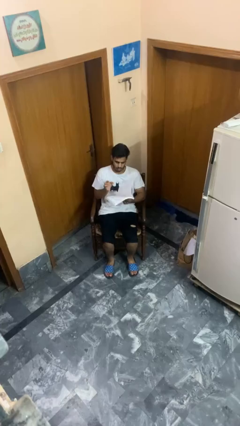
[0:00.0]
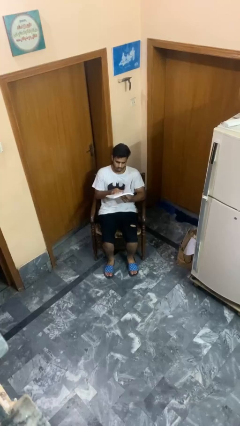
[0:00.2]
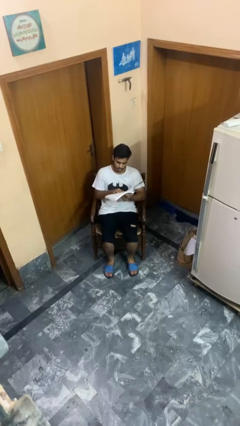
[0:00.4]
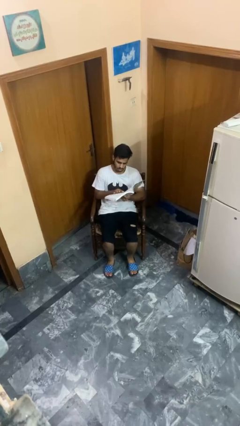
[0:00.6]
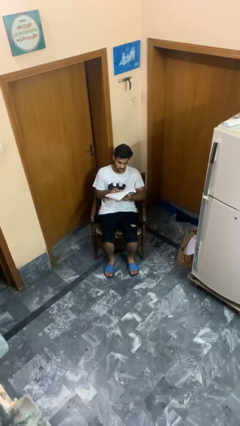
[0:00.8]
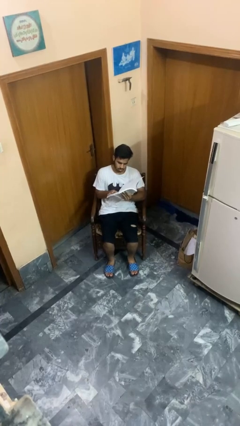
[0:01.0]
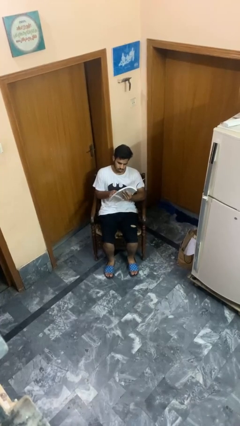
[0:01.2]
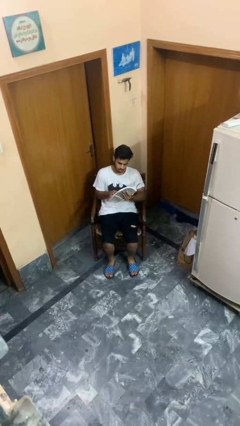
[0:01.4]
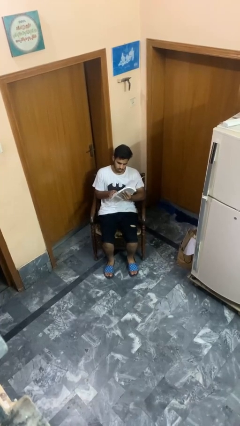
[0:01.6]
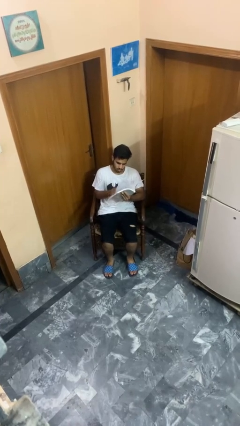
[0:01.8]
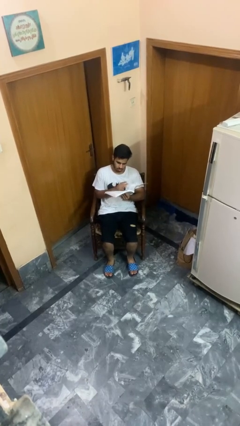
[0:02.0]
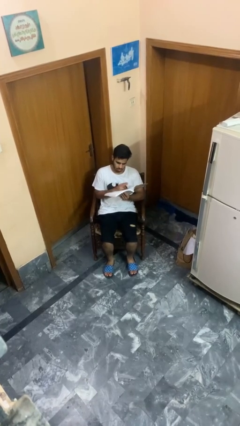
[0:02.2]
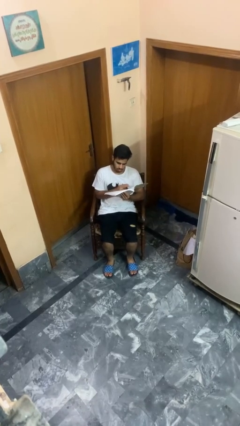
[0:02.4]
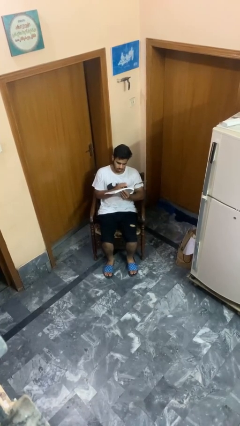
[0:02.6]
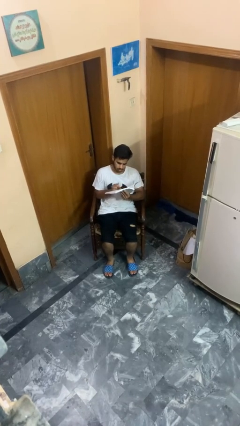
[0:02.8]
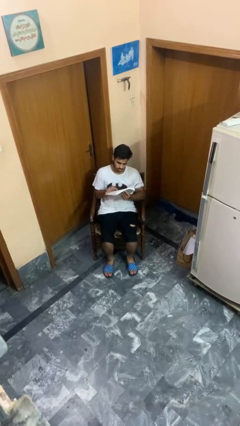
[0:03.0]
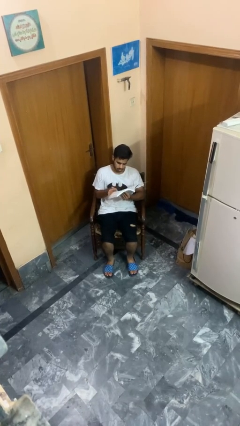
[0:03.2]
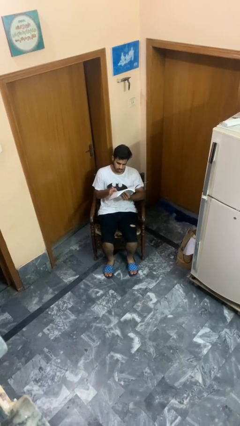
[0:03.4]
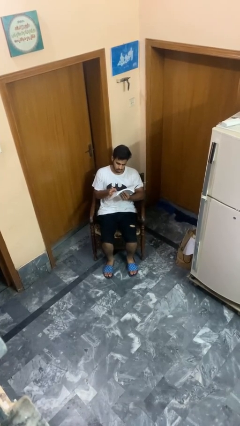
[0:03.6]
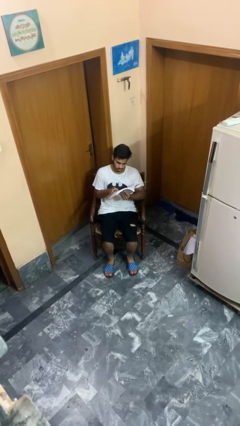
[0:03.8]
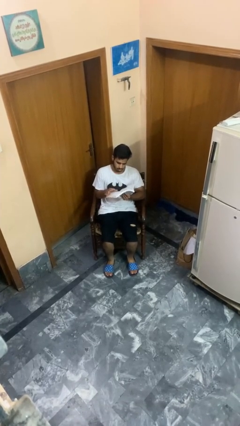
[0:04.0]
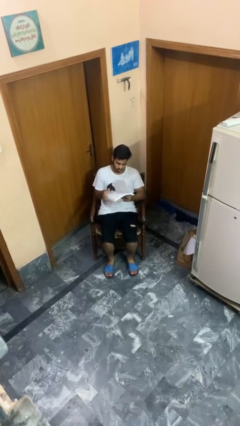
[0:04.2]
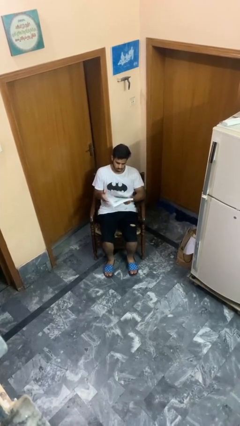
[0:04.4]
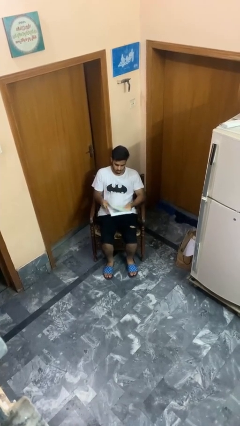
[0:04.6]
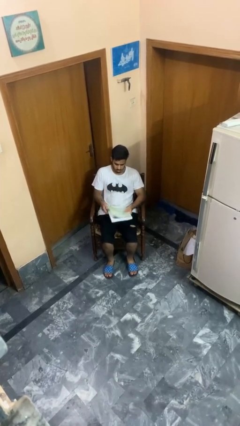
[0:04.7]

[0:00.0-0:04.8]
person reads book

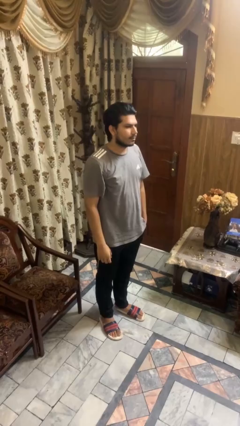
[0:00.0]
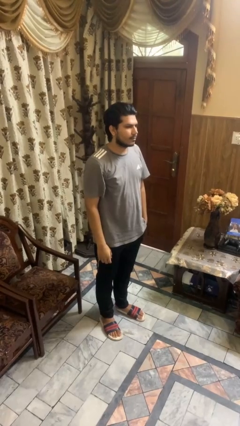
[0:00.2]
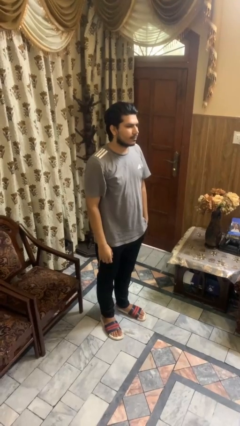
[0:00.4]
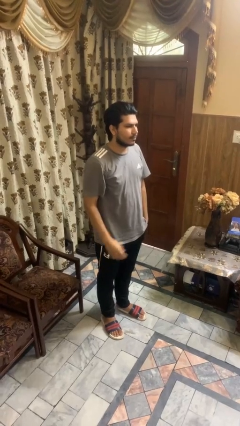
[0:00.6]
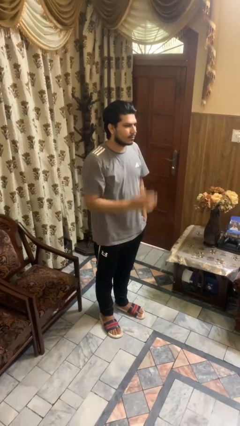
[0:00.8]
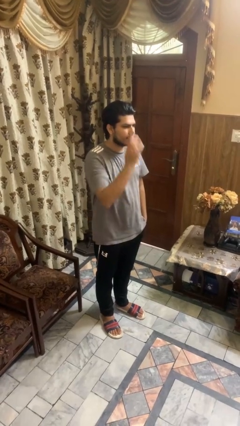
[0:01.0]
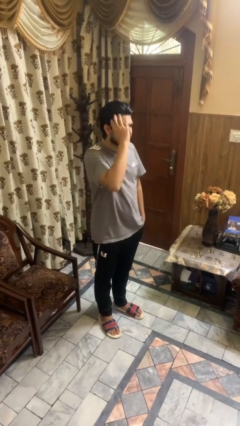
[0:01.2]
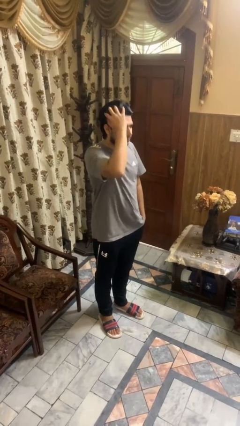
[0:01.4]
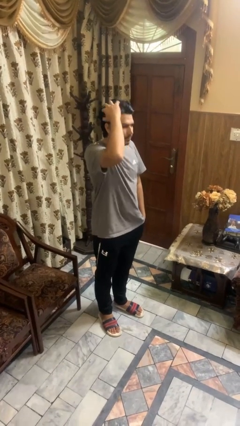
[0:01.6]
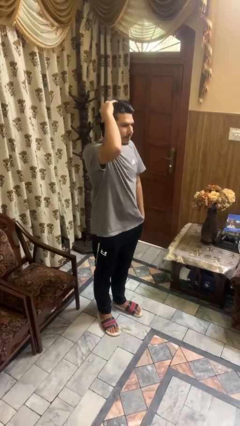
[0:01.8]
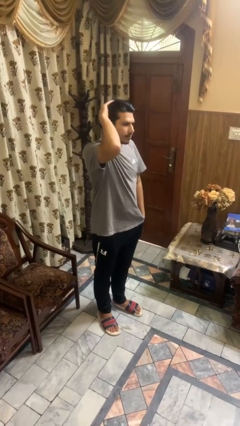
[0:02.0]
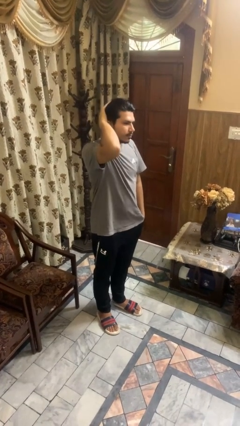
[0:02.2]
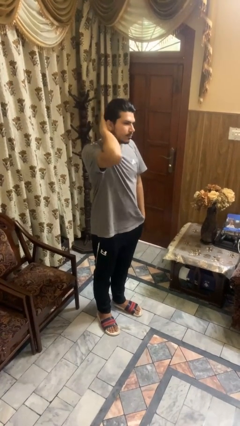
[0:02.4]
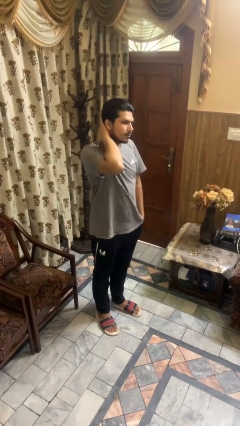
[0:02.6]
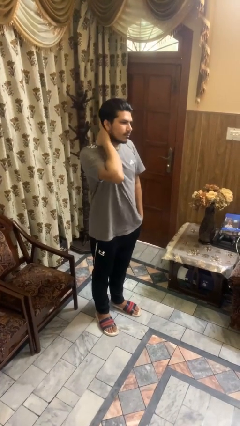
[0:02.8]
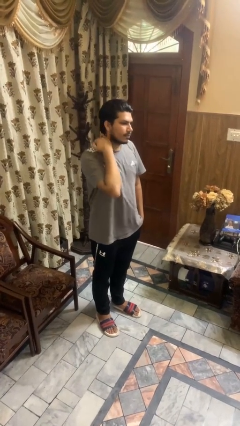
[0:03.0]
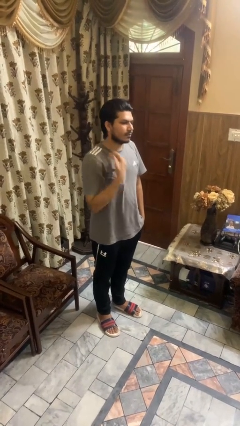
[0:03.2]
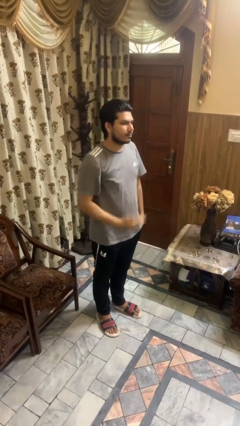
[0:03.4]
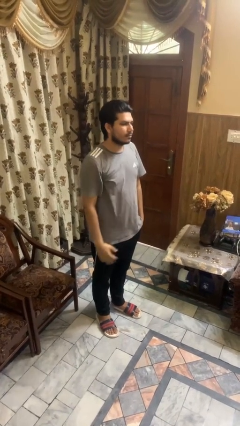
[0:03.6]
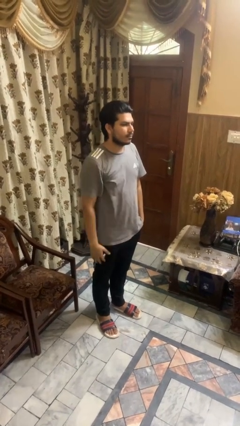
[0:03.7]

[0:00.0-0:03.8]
person strokes hair

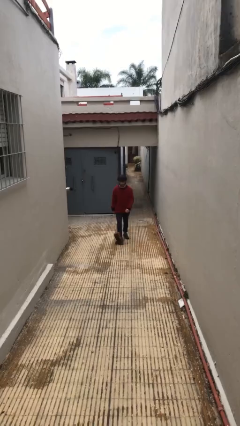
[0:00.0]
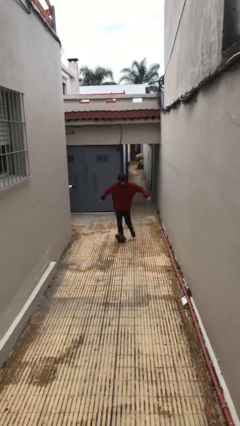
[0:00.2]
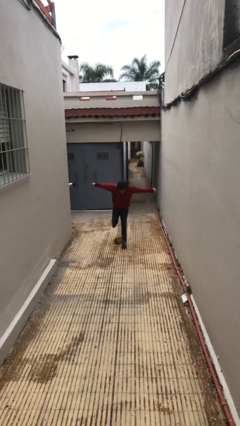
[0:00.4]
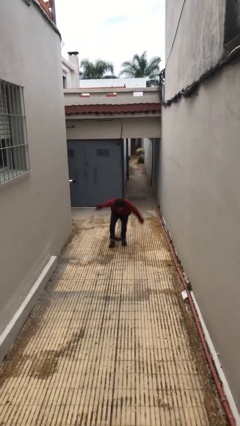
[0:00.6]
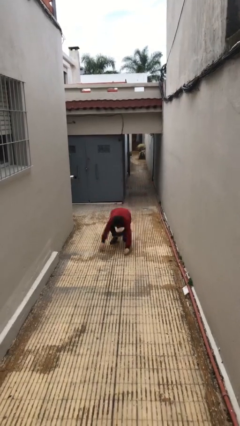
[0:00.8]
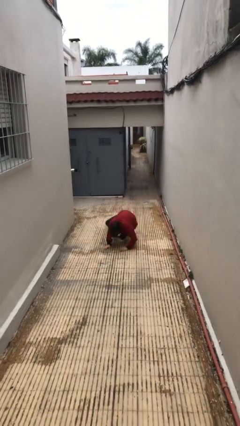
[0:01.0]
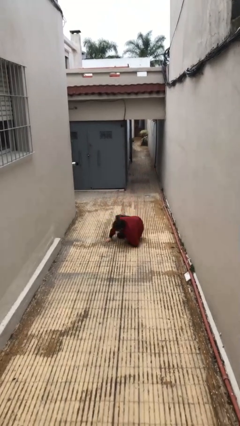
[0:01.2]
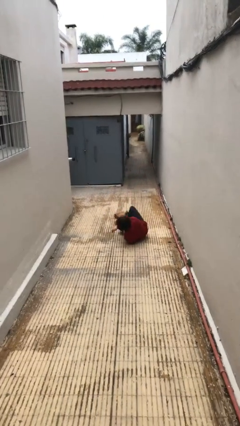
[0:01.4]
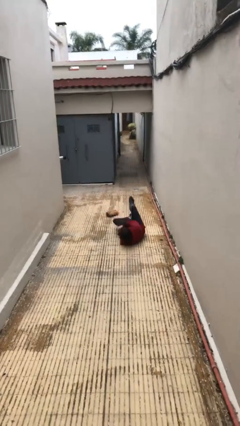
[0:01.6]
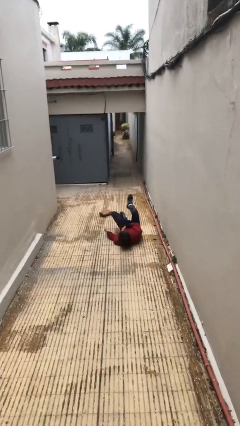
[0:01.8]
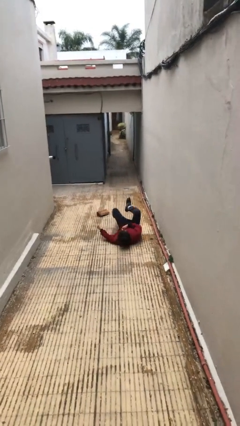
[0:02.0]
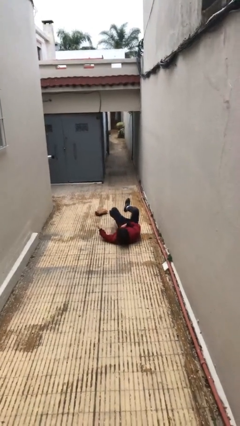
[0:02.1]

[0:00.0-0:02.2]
person trips on object on floor

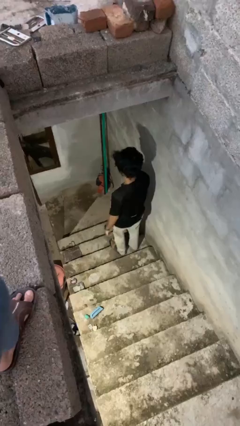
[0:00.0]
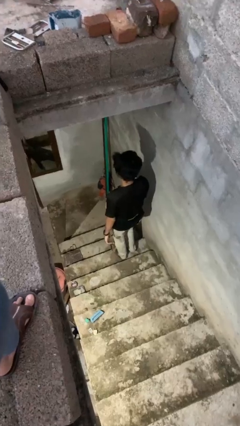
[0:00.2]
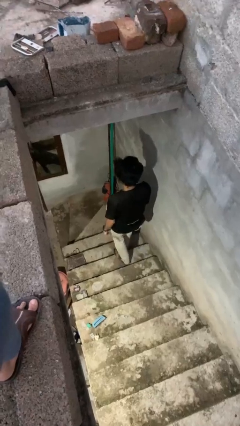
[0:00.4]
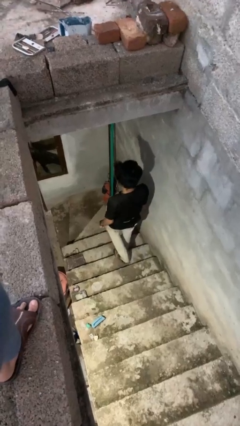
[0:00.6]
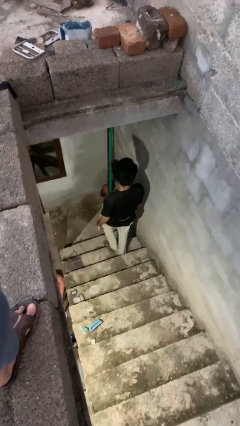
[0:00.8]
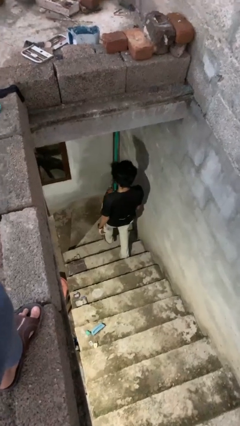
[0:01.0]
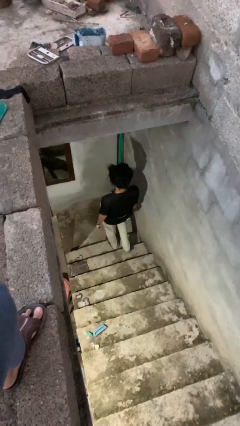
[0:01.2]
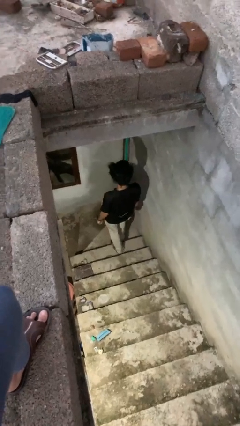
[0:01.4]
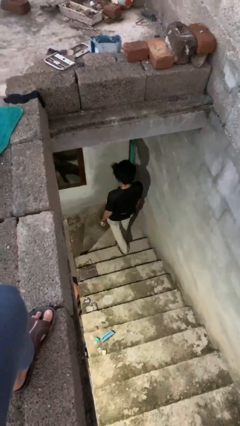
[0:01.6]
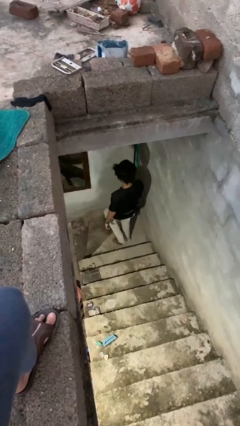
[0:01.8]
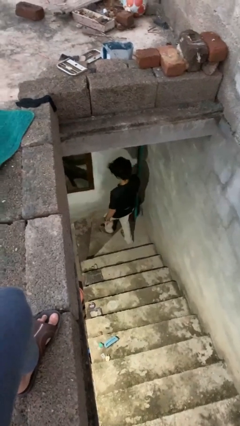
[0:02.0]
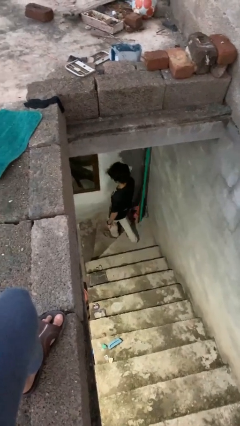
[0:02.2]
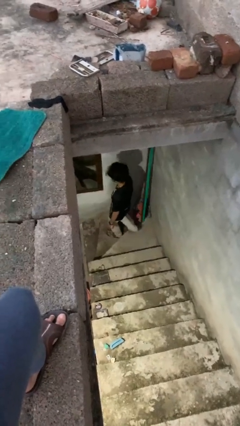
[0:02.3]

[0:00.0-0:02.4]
person climbs down stairs

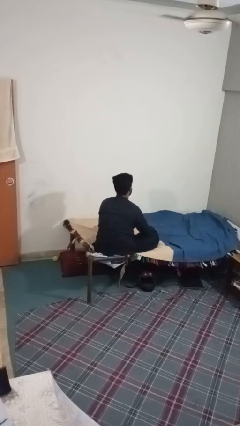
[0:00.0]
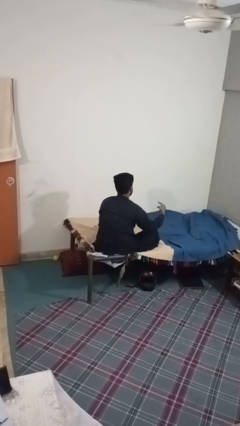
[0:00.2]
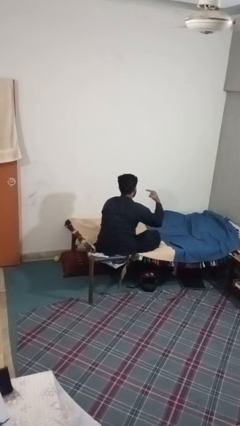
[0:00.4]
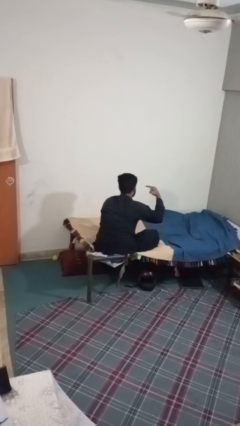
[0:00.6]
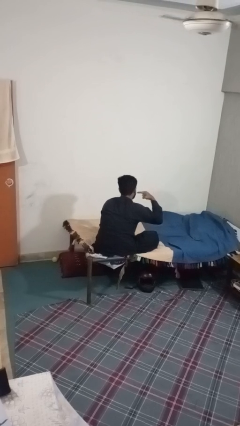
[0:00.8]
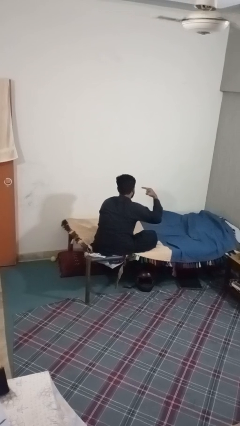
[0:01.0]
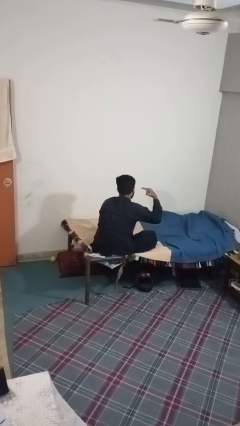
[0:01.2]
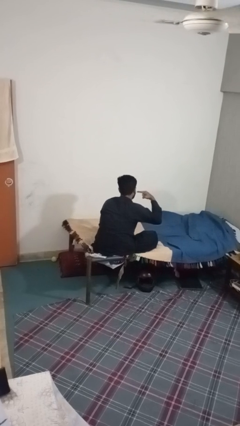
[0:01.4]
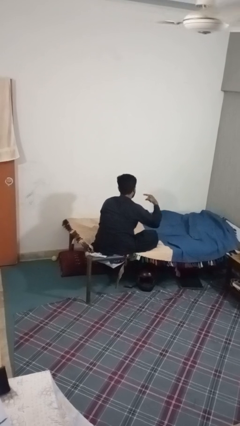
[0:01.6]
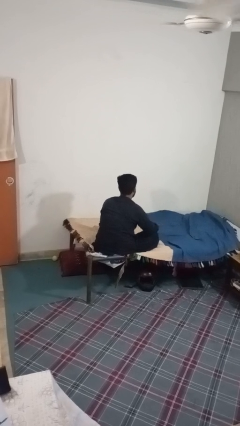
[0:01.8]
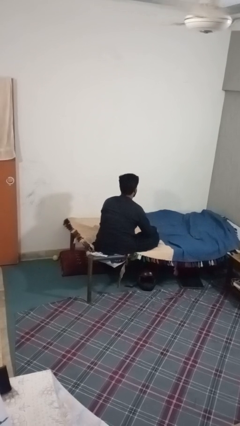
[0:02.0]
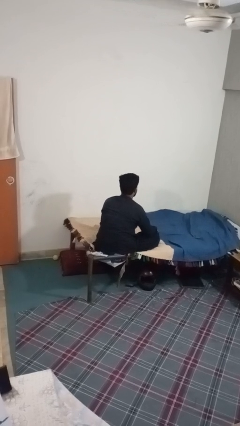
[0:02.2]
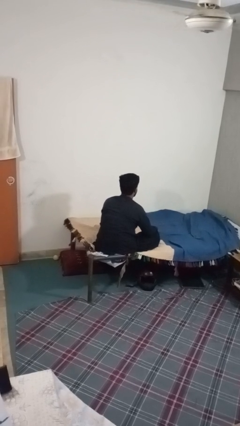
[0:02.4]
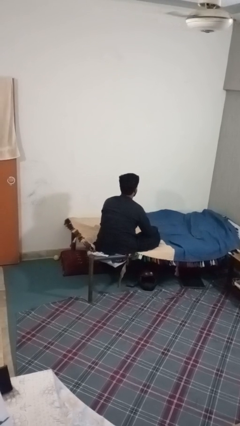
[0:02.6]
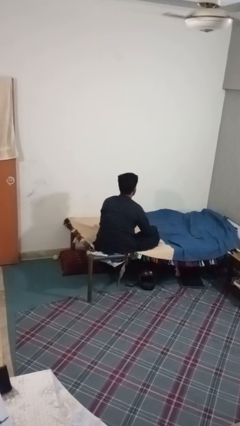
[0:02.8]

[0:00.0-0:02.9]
person gestures listen closely

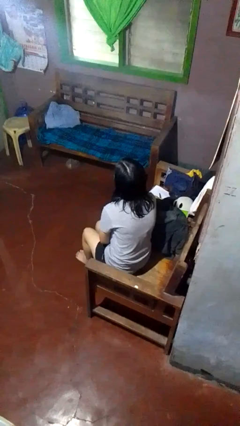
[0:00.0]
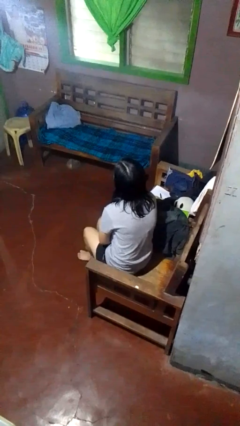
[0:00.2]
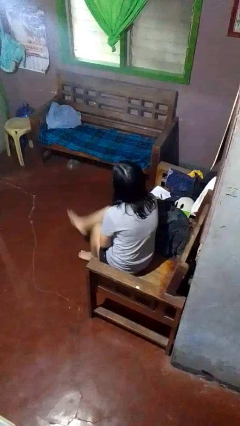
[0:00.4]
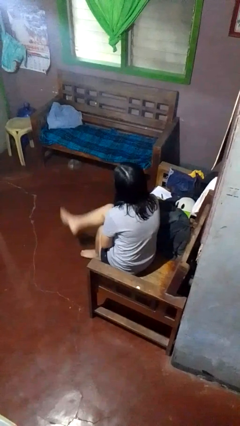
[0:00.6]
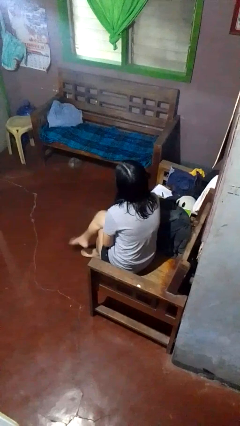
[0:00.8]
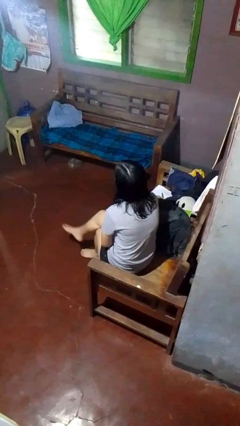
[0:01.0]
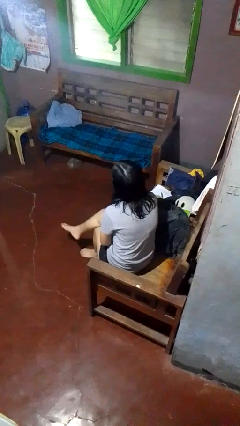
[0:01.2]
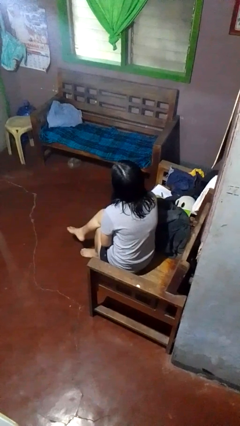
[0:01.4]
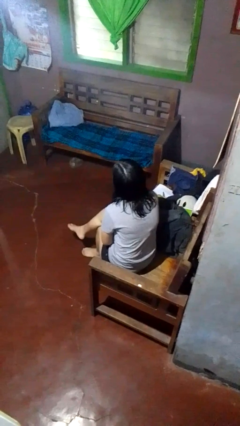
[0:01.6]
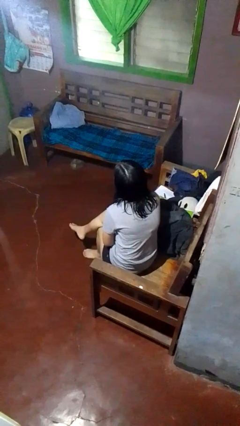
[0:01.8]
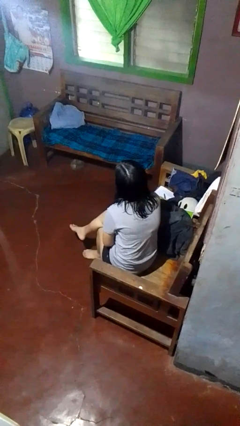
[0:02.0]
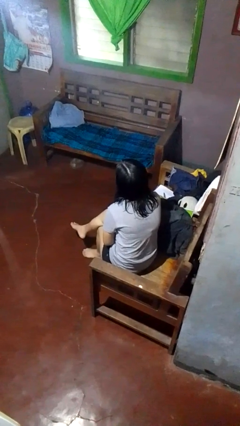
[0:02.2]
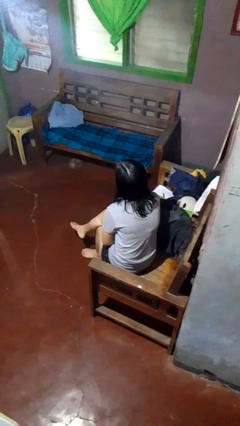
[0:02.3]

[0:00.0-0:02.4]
person crosses legs
